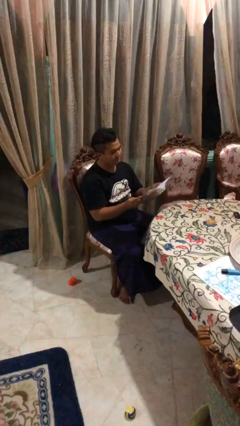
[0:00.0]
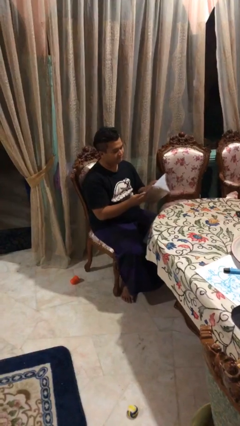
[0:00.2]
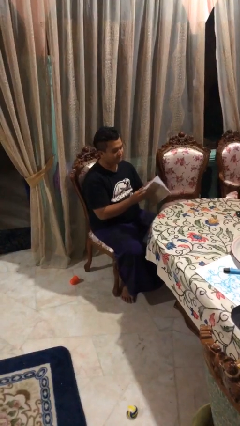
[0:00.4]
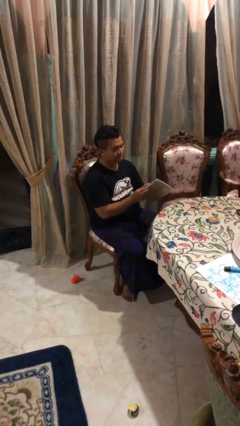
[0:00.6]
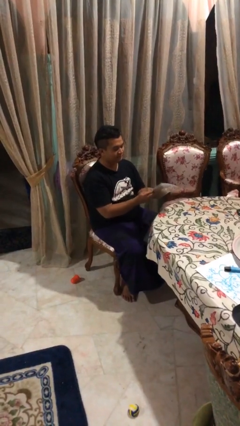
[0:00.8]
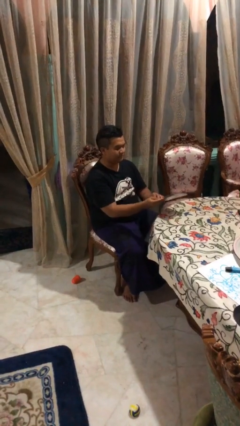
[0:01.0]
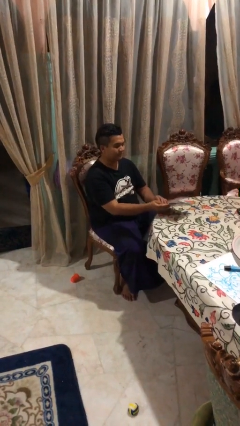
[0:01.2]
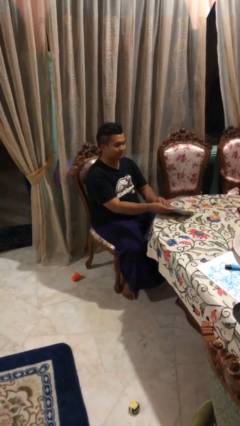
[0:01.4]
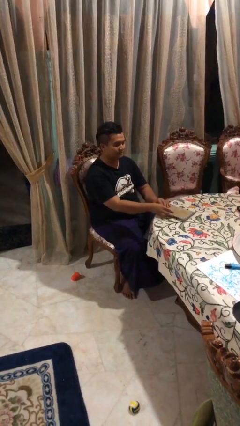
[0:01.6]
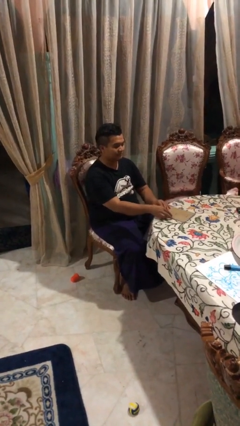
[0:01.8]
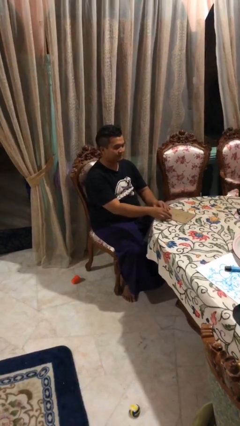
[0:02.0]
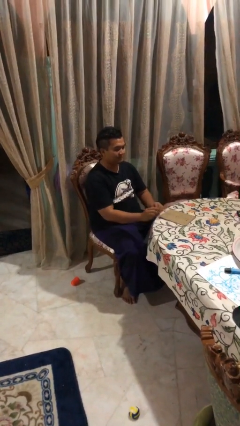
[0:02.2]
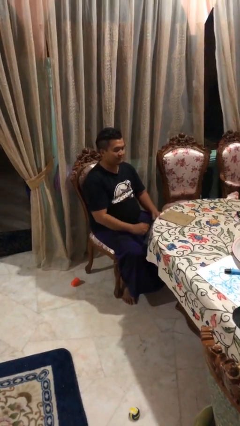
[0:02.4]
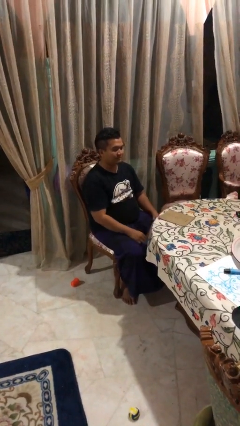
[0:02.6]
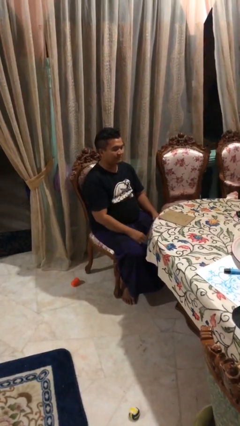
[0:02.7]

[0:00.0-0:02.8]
person puts down object on table

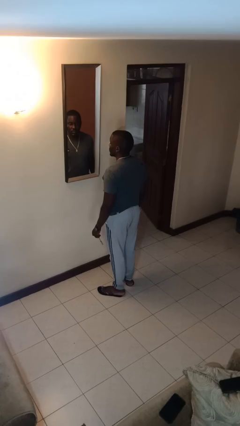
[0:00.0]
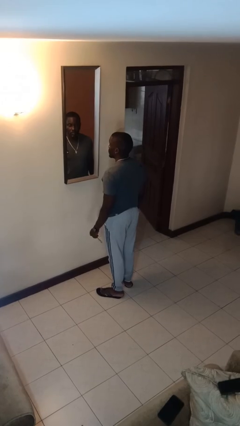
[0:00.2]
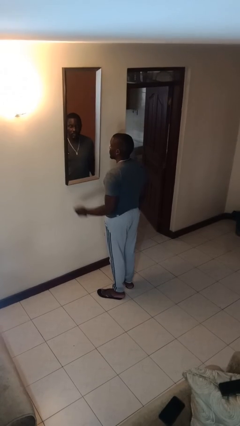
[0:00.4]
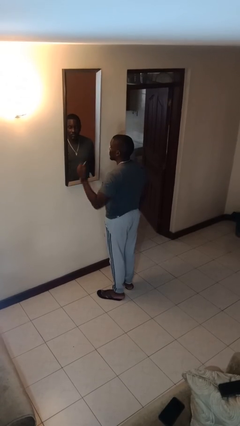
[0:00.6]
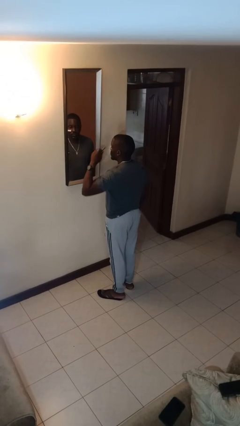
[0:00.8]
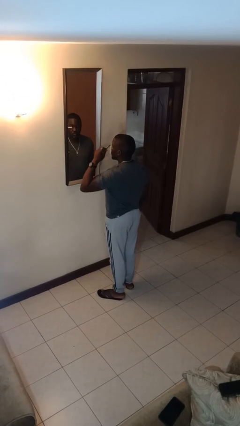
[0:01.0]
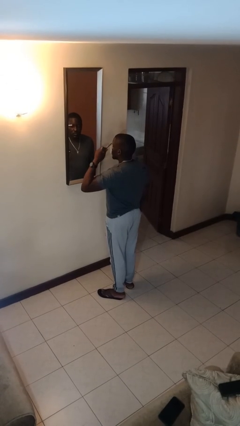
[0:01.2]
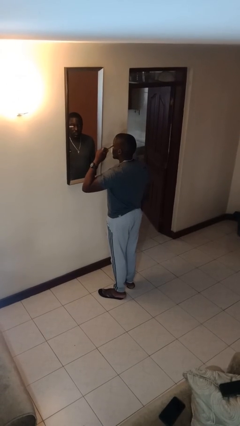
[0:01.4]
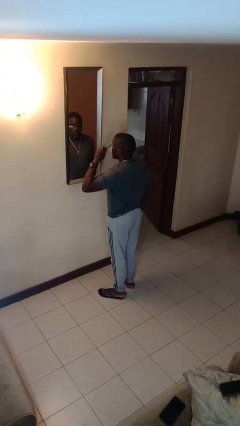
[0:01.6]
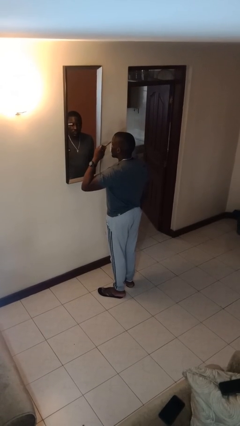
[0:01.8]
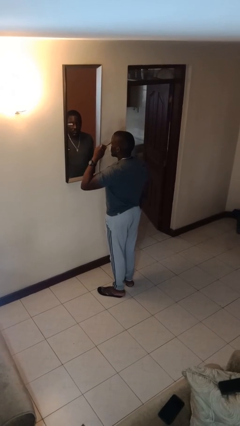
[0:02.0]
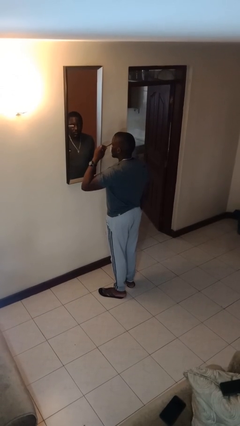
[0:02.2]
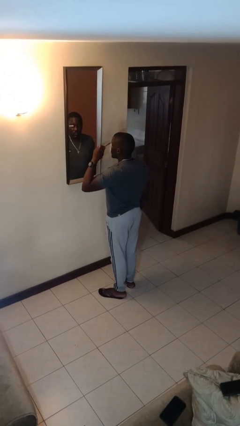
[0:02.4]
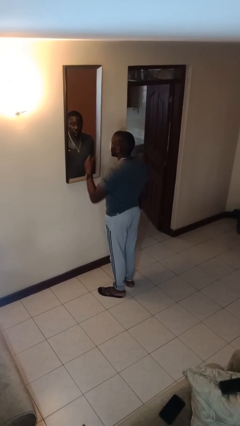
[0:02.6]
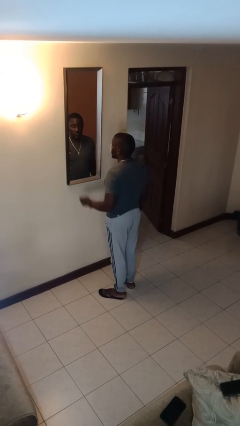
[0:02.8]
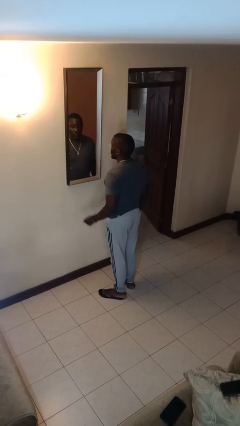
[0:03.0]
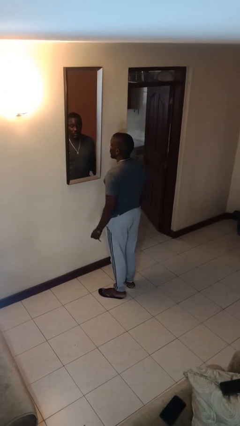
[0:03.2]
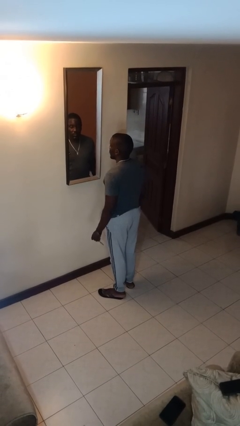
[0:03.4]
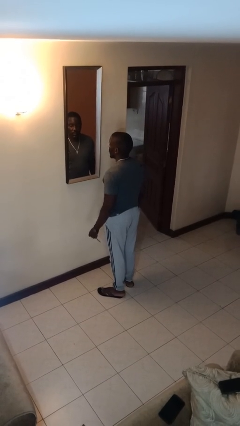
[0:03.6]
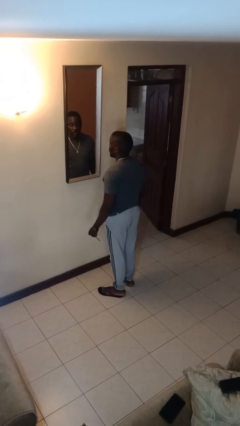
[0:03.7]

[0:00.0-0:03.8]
person applies eye makeup

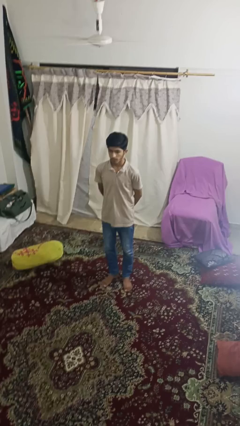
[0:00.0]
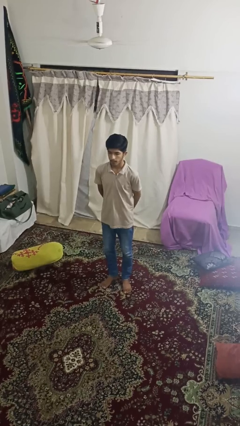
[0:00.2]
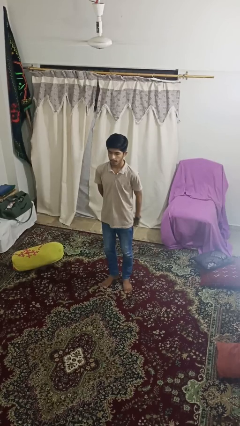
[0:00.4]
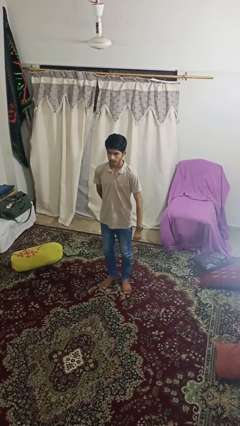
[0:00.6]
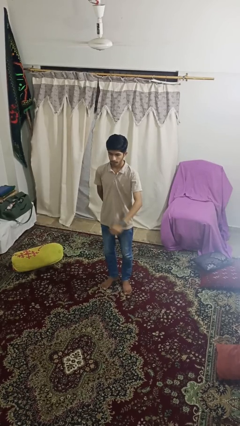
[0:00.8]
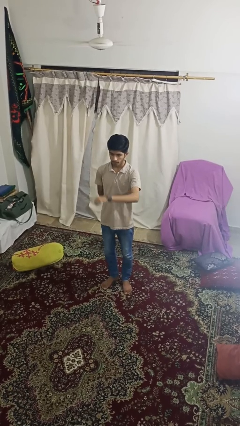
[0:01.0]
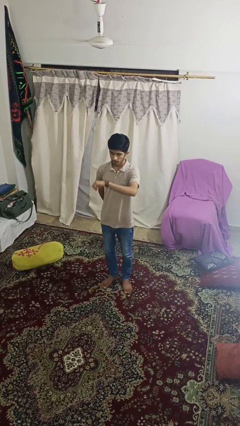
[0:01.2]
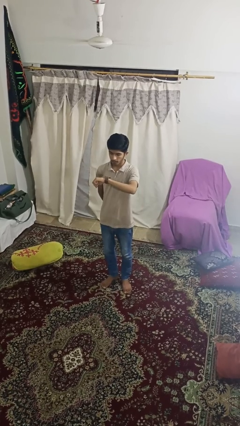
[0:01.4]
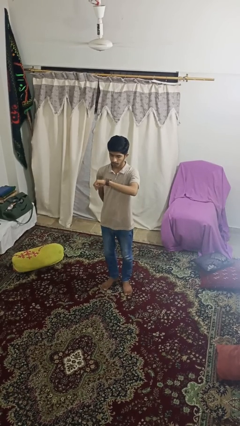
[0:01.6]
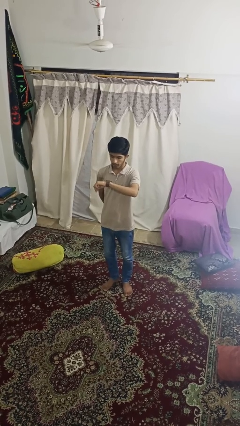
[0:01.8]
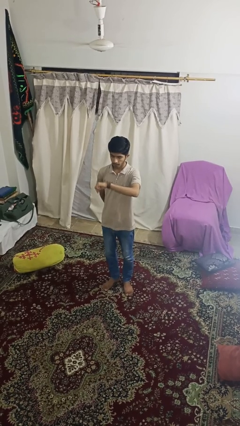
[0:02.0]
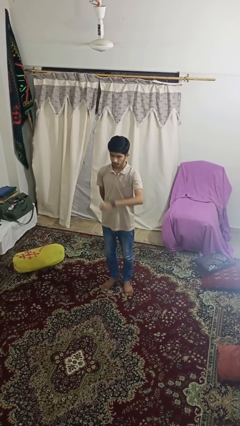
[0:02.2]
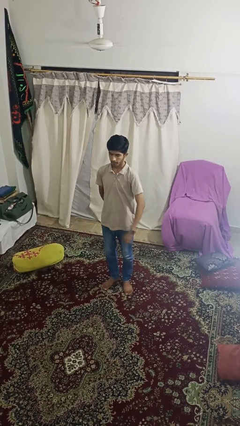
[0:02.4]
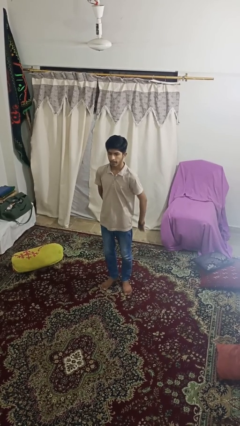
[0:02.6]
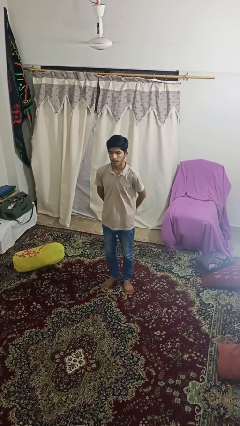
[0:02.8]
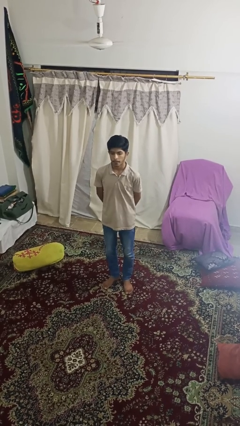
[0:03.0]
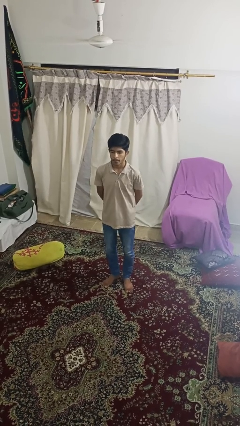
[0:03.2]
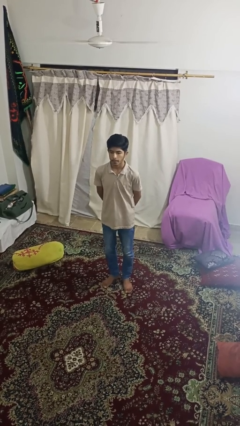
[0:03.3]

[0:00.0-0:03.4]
person looks at wristwatch

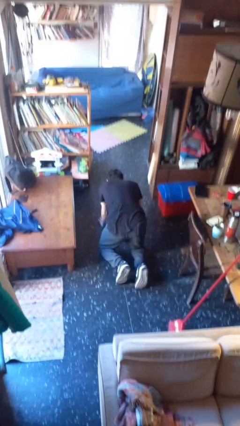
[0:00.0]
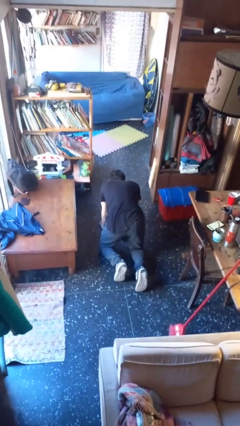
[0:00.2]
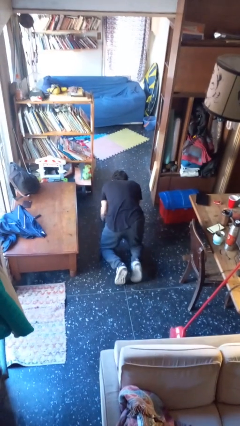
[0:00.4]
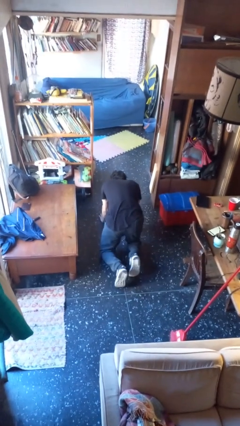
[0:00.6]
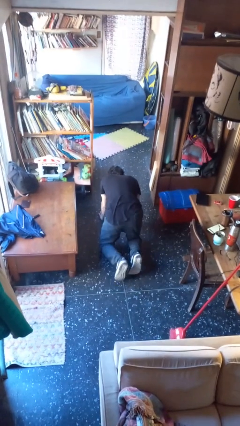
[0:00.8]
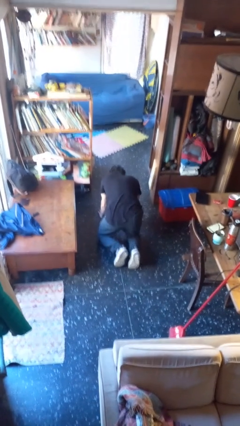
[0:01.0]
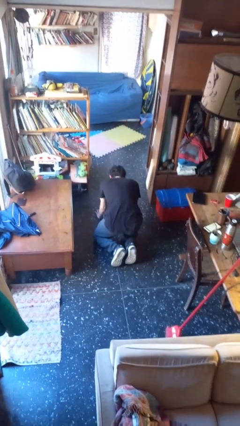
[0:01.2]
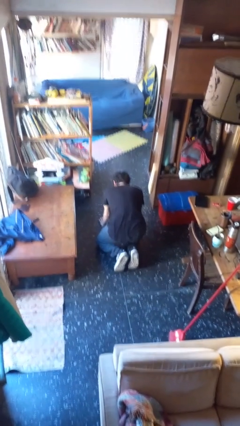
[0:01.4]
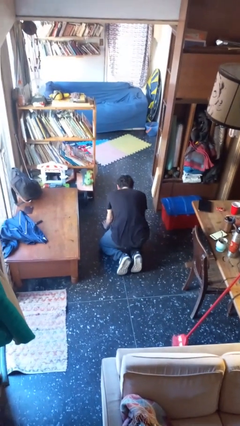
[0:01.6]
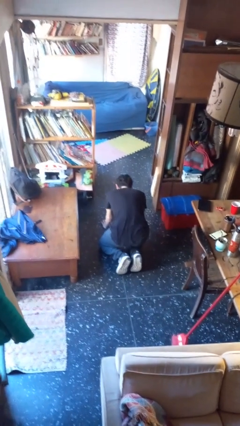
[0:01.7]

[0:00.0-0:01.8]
person crawls

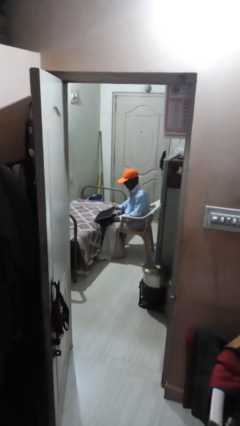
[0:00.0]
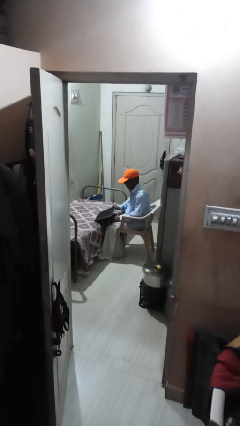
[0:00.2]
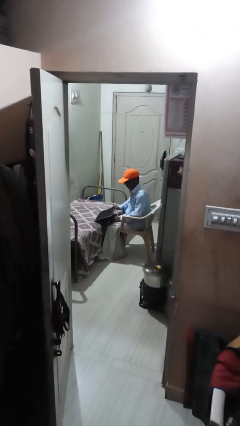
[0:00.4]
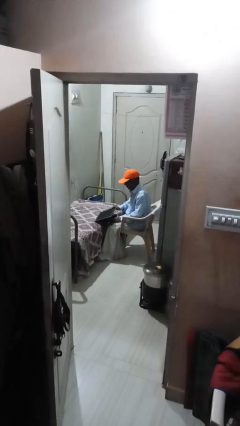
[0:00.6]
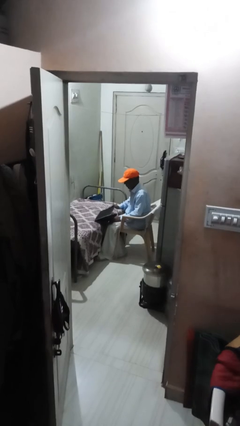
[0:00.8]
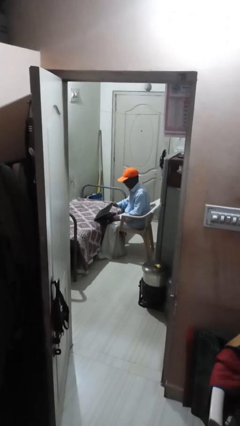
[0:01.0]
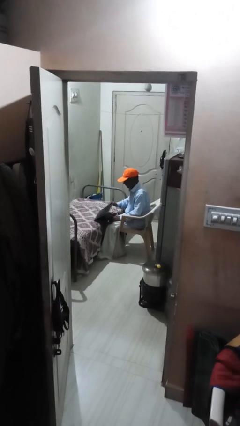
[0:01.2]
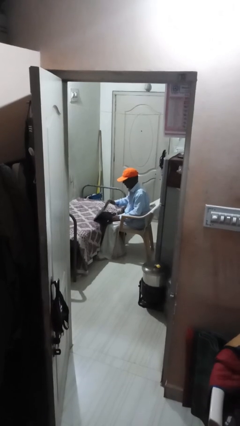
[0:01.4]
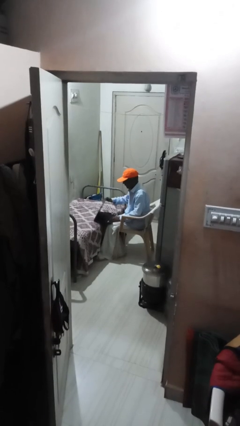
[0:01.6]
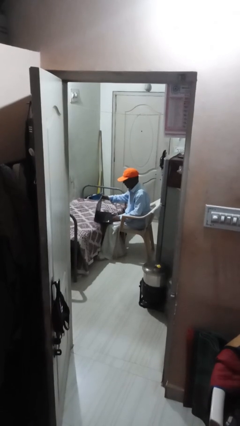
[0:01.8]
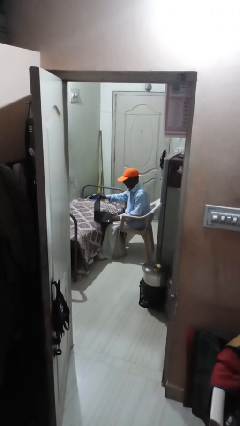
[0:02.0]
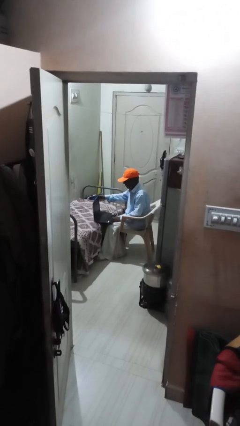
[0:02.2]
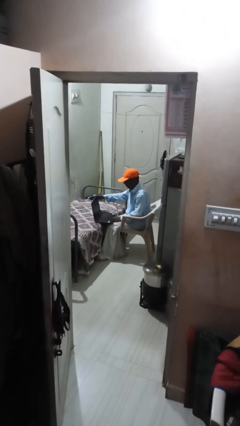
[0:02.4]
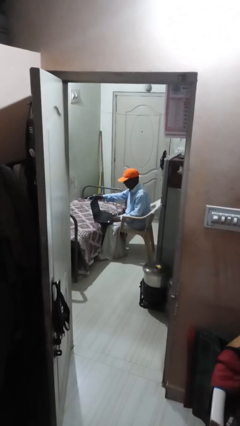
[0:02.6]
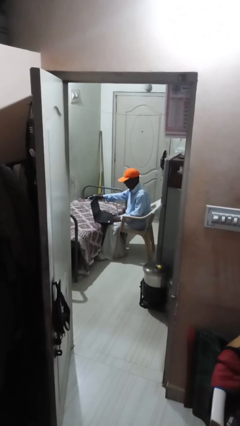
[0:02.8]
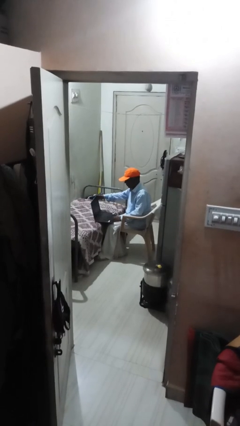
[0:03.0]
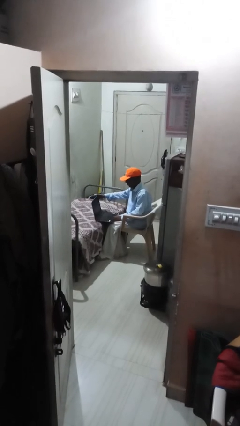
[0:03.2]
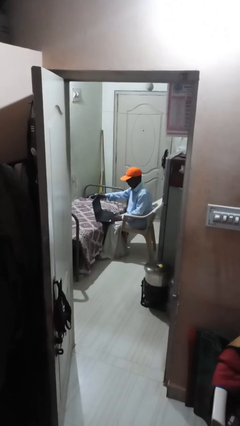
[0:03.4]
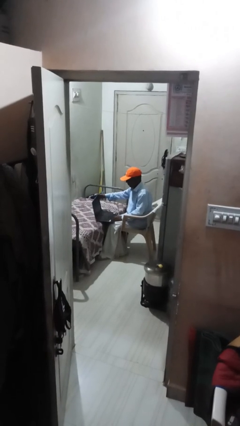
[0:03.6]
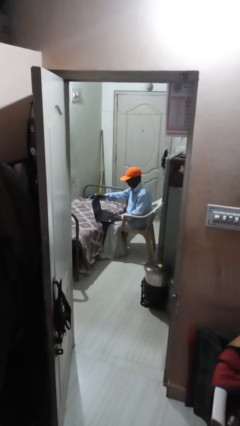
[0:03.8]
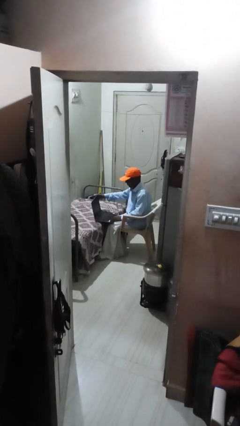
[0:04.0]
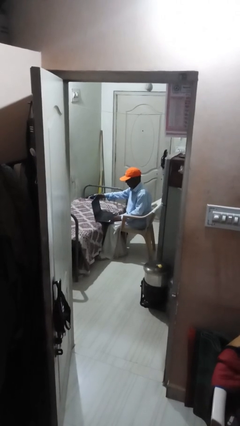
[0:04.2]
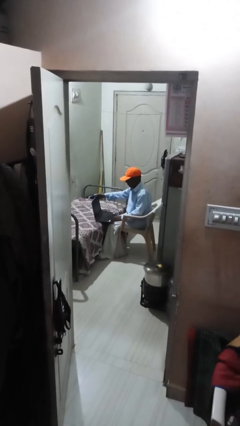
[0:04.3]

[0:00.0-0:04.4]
person interacts with laptop

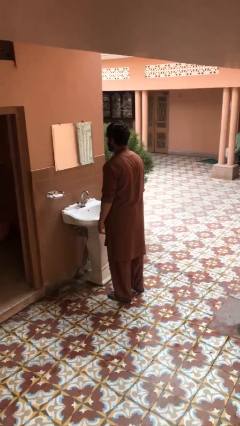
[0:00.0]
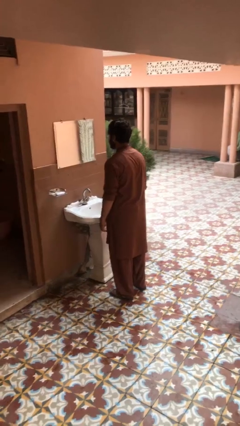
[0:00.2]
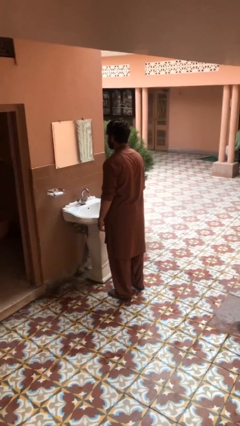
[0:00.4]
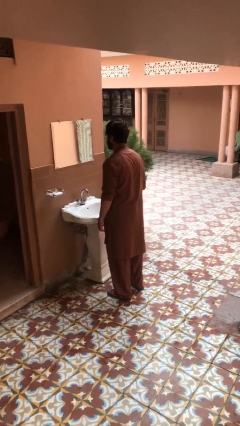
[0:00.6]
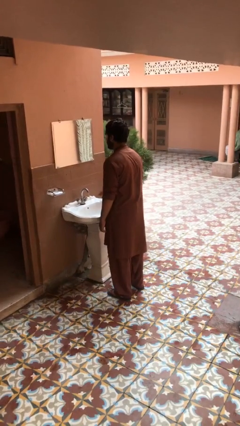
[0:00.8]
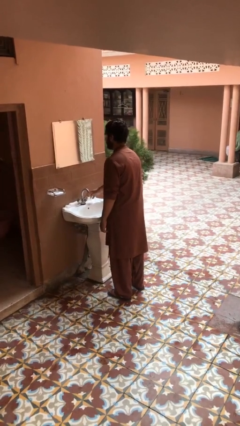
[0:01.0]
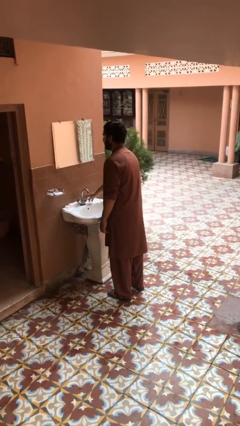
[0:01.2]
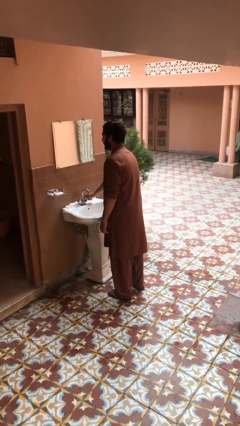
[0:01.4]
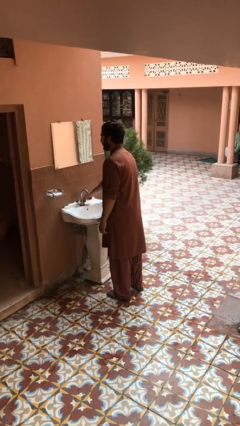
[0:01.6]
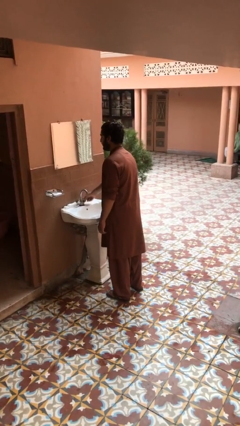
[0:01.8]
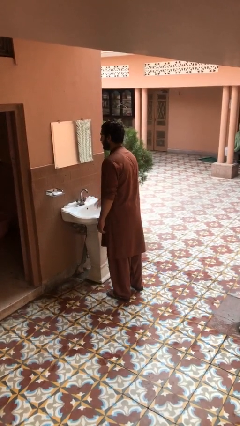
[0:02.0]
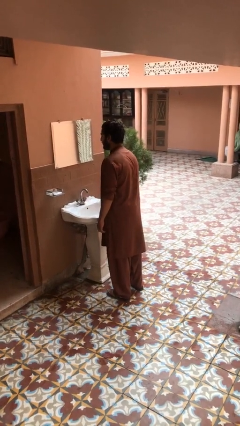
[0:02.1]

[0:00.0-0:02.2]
person turns off faucet
